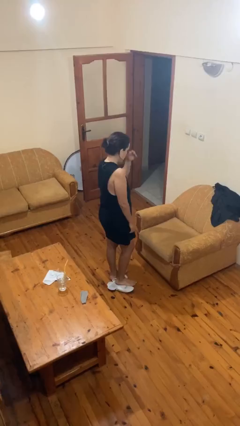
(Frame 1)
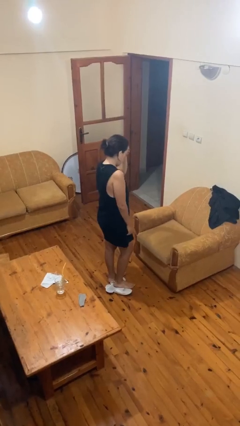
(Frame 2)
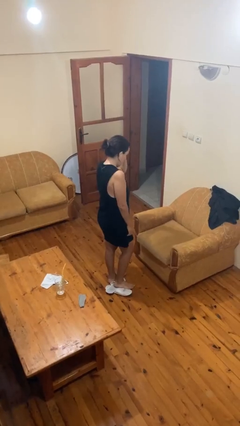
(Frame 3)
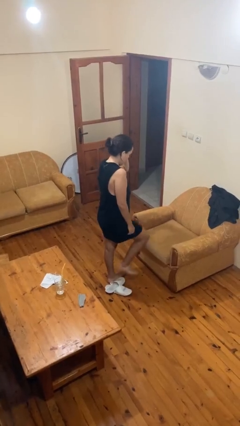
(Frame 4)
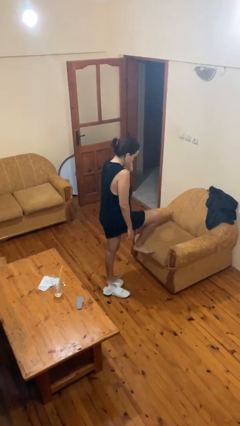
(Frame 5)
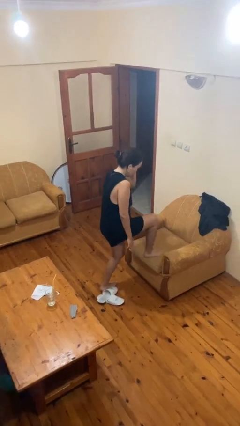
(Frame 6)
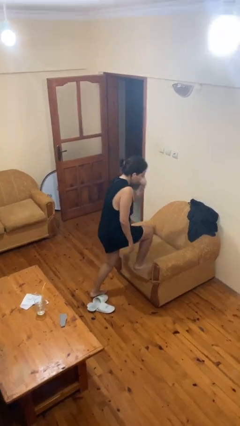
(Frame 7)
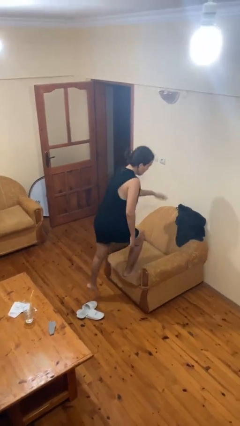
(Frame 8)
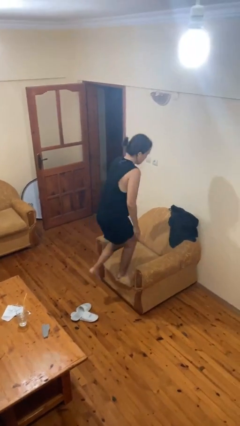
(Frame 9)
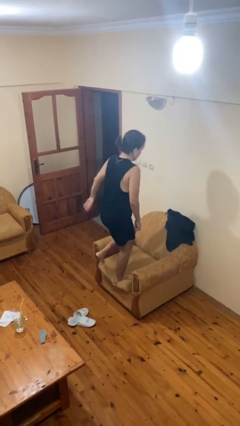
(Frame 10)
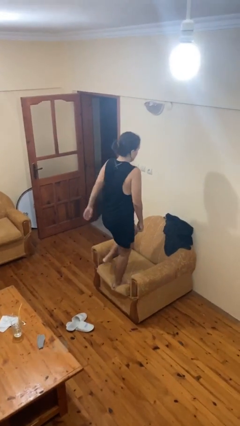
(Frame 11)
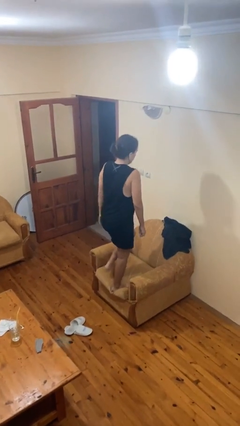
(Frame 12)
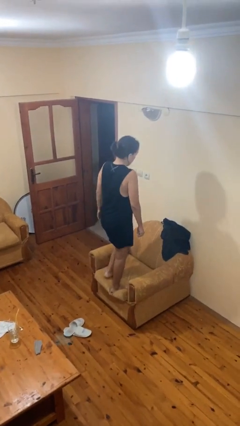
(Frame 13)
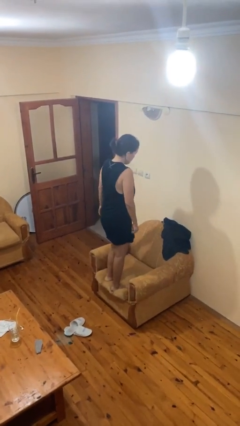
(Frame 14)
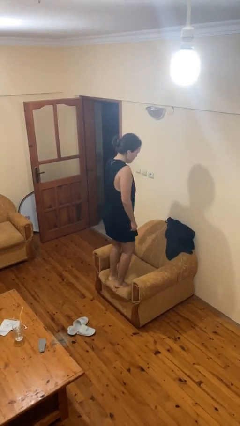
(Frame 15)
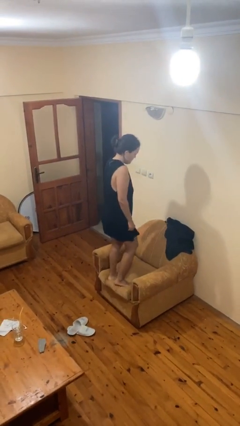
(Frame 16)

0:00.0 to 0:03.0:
person climbs on chair

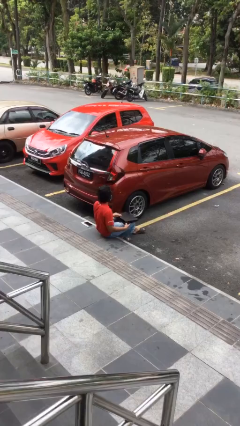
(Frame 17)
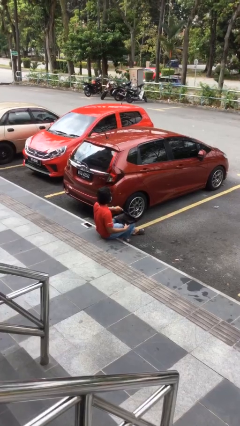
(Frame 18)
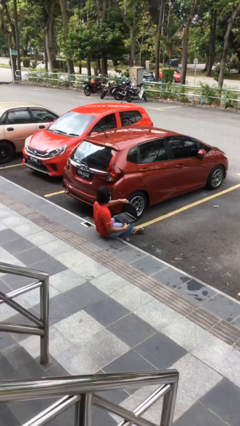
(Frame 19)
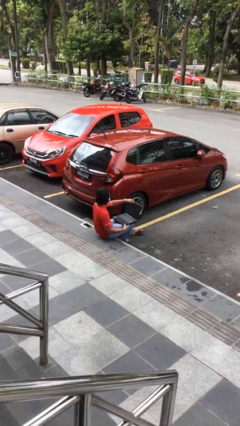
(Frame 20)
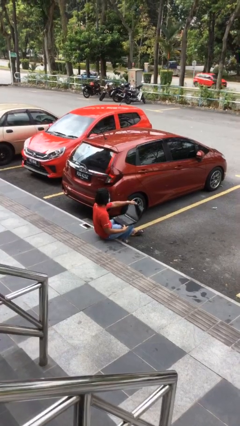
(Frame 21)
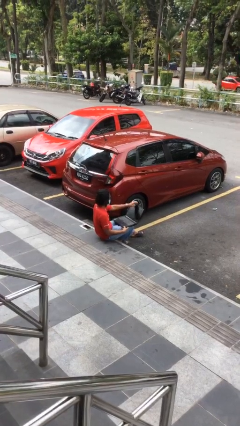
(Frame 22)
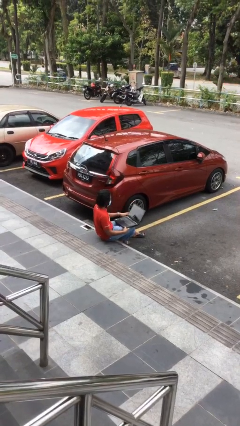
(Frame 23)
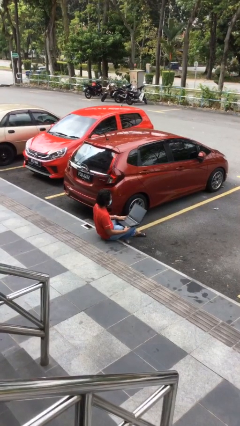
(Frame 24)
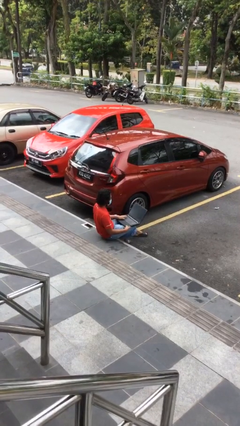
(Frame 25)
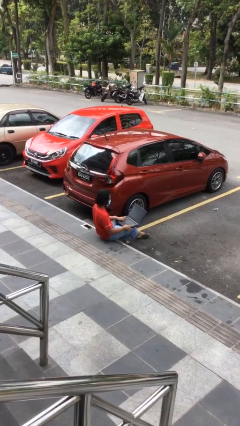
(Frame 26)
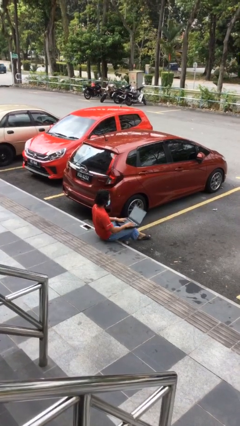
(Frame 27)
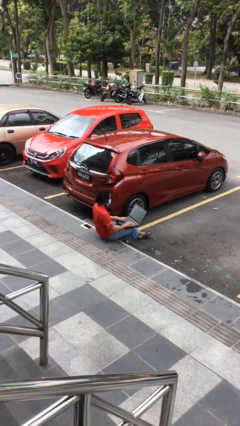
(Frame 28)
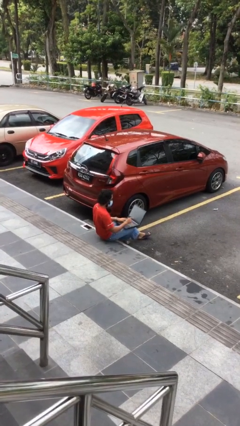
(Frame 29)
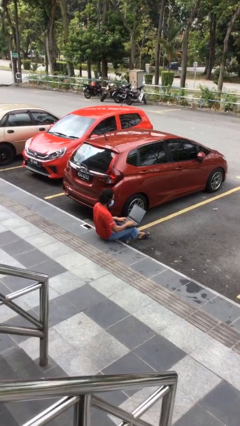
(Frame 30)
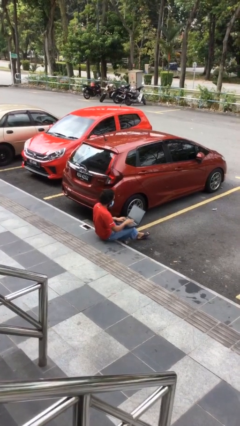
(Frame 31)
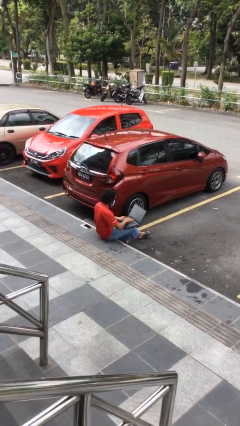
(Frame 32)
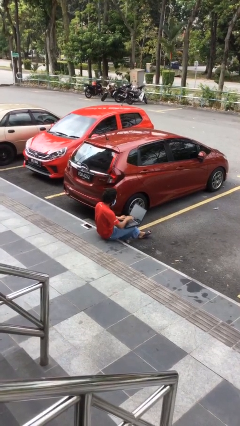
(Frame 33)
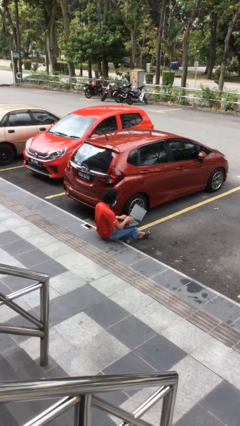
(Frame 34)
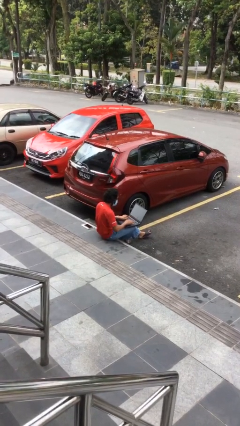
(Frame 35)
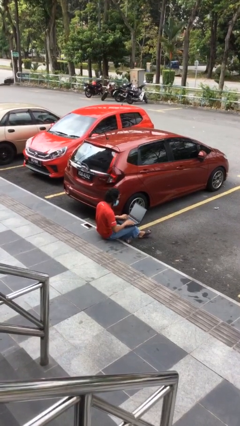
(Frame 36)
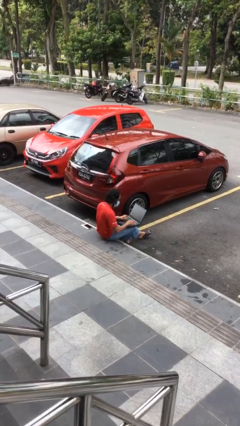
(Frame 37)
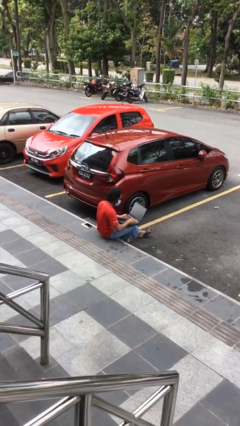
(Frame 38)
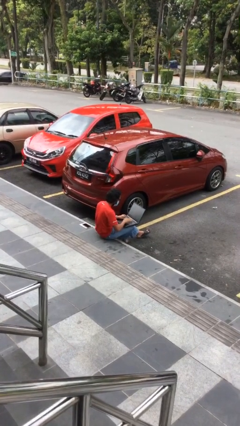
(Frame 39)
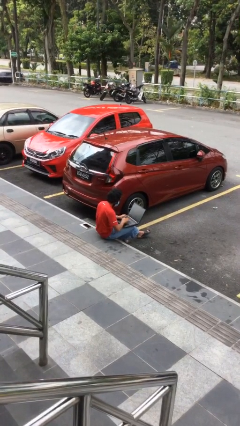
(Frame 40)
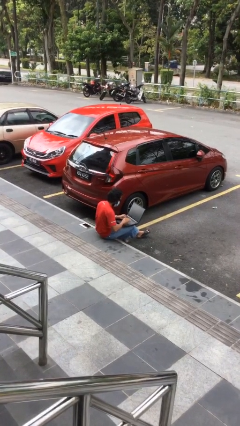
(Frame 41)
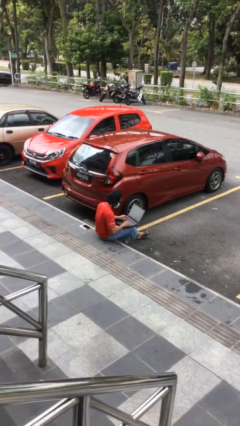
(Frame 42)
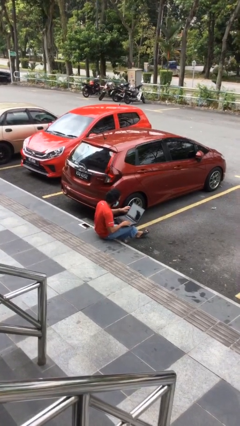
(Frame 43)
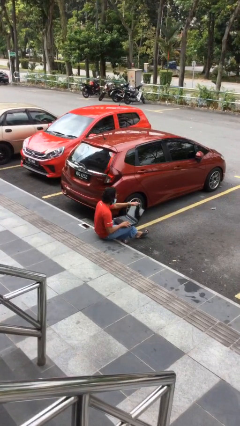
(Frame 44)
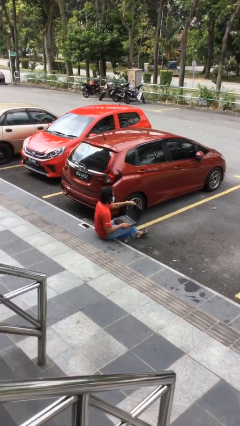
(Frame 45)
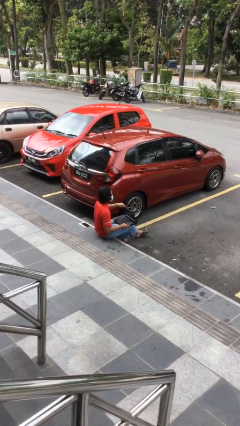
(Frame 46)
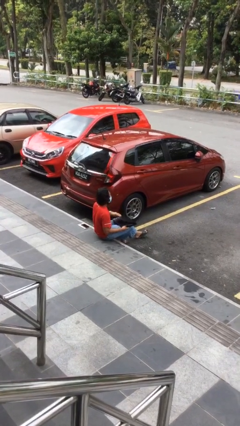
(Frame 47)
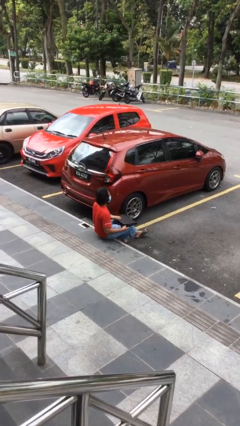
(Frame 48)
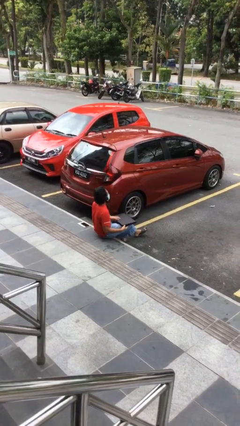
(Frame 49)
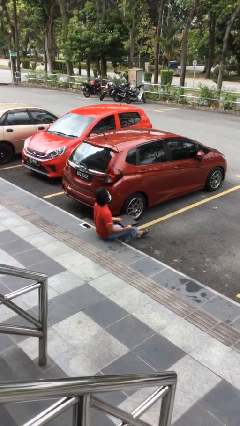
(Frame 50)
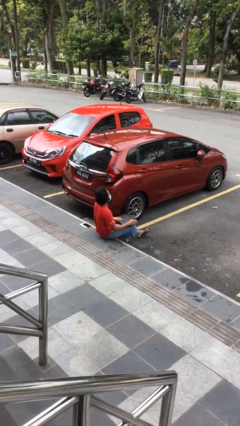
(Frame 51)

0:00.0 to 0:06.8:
person interacts with laptop

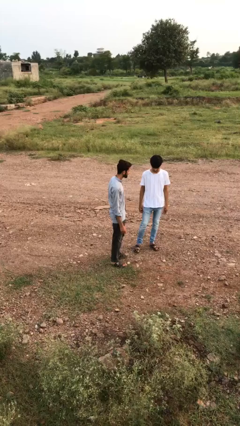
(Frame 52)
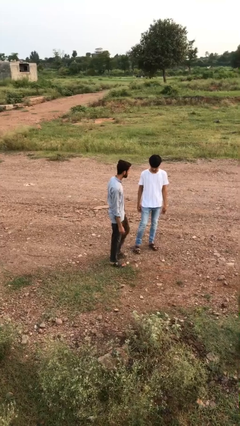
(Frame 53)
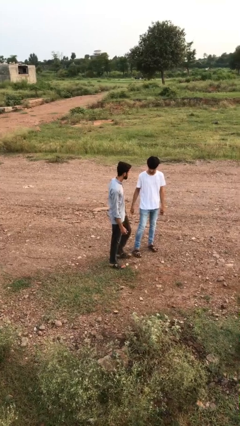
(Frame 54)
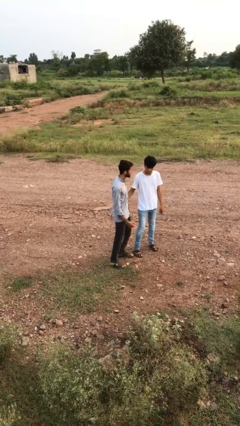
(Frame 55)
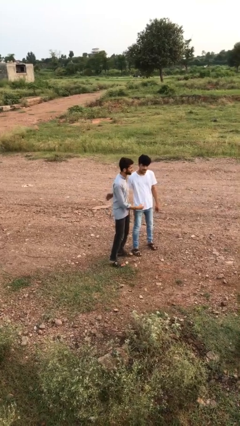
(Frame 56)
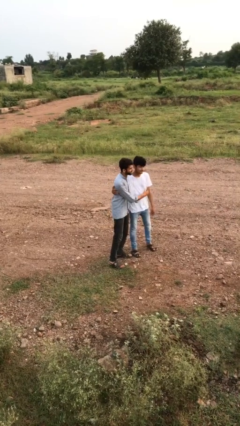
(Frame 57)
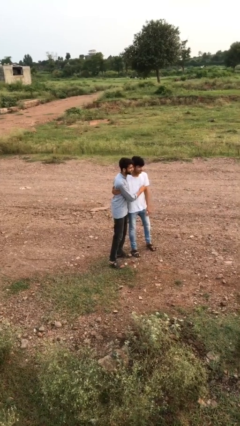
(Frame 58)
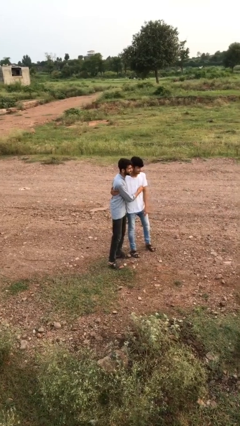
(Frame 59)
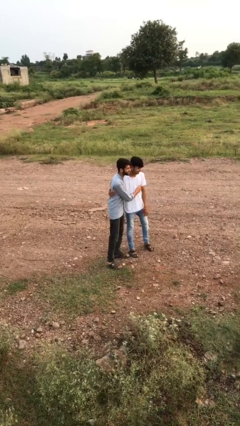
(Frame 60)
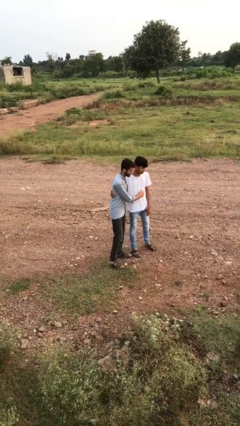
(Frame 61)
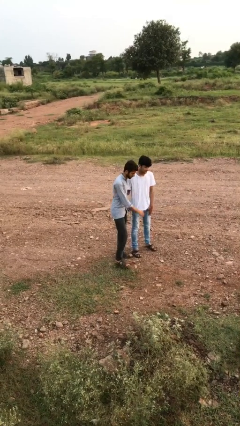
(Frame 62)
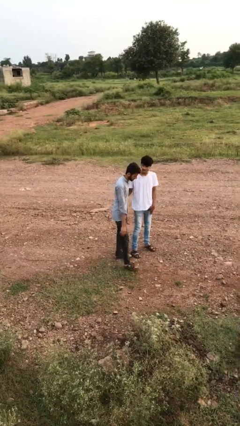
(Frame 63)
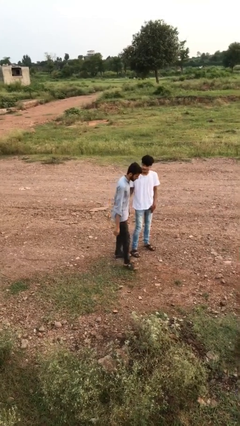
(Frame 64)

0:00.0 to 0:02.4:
person embraces person

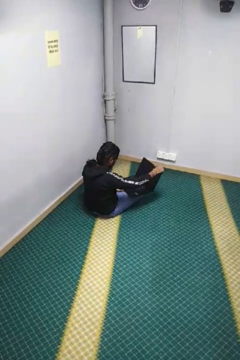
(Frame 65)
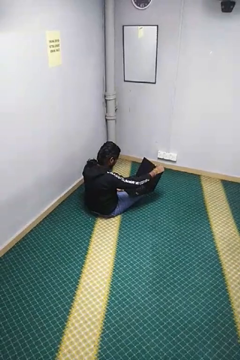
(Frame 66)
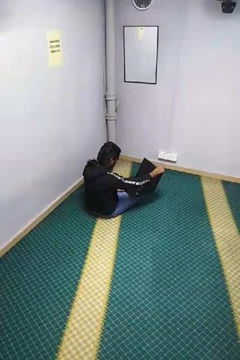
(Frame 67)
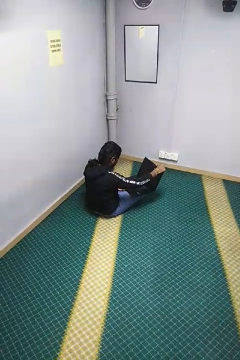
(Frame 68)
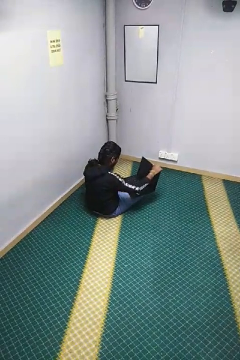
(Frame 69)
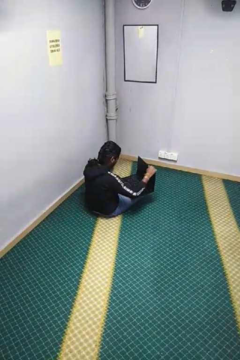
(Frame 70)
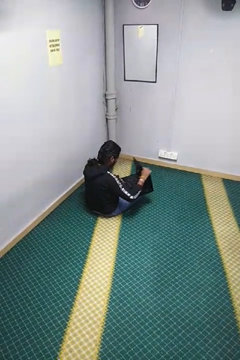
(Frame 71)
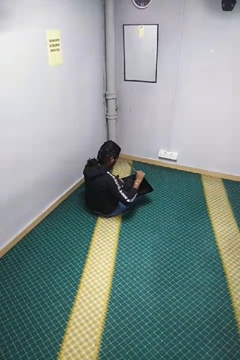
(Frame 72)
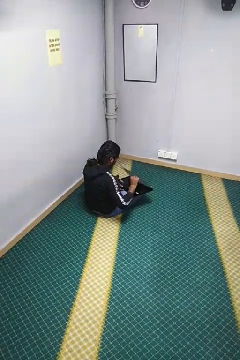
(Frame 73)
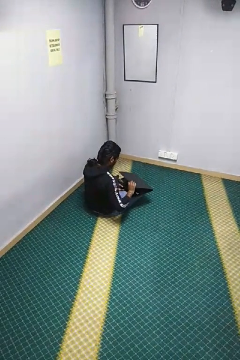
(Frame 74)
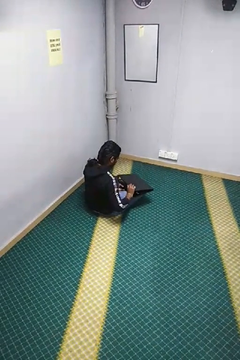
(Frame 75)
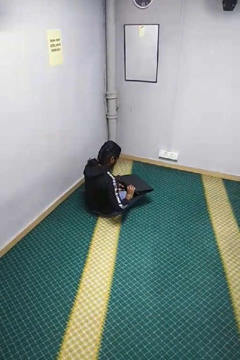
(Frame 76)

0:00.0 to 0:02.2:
person closes laptop

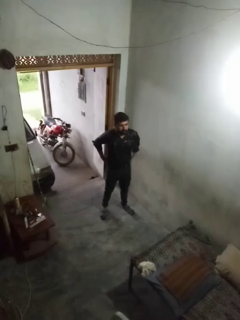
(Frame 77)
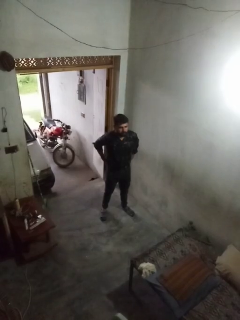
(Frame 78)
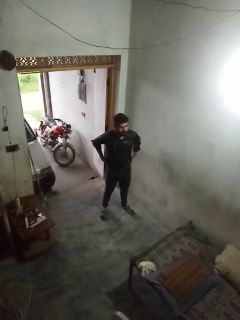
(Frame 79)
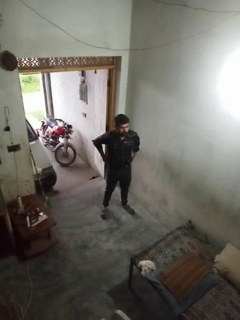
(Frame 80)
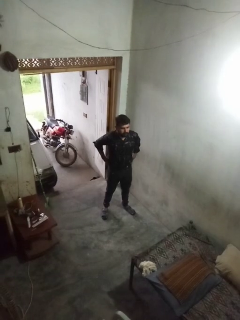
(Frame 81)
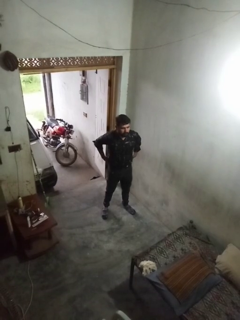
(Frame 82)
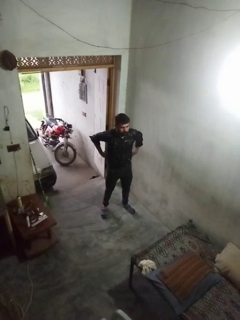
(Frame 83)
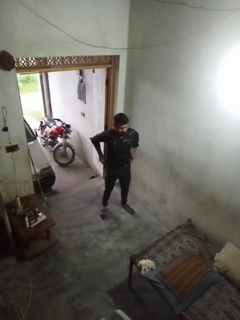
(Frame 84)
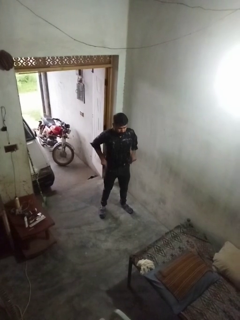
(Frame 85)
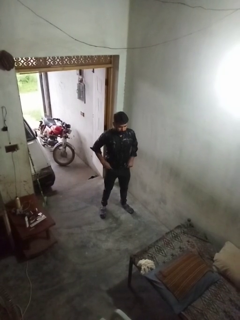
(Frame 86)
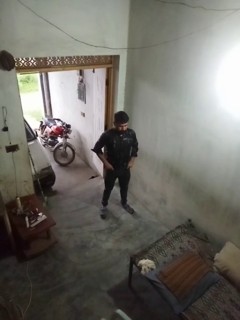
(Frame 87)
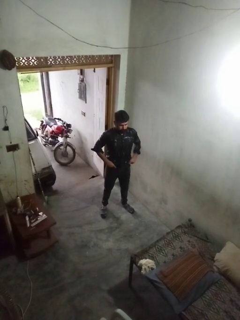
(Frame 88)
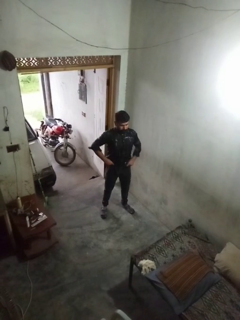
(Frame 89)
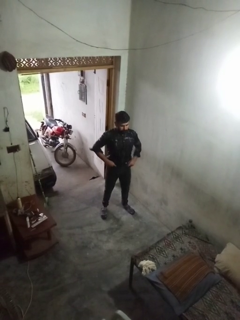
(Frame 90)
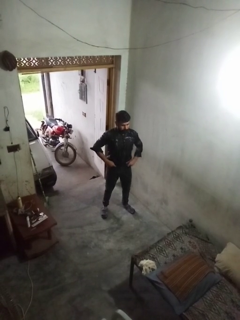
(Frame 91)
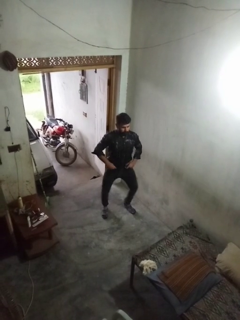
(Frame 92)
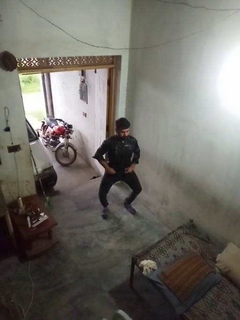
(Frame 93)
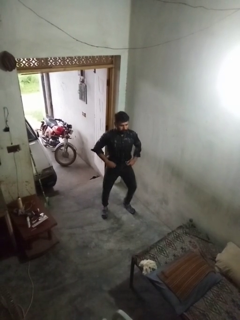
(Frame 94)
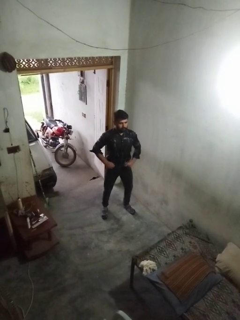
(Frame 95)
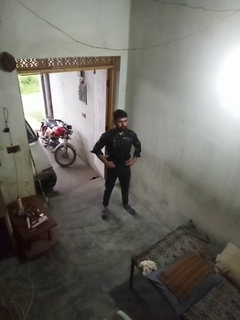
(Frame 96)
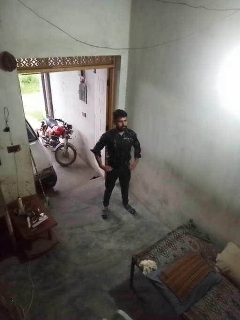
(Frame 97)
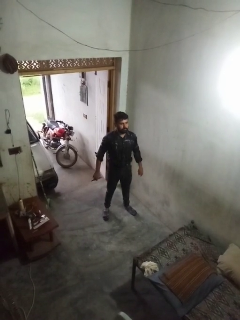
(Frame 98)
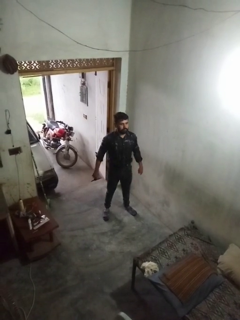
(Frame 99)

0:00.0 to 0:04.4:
person hikes up pants
